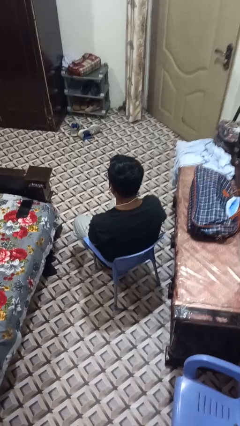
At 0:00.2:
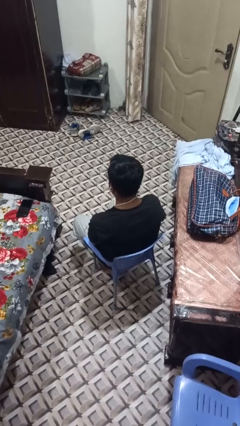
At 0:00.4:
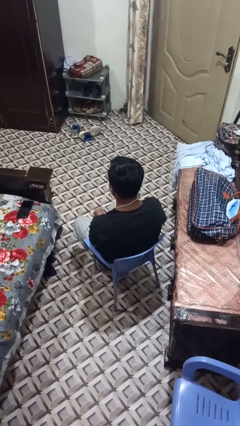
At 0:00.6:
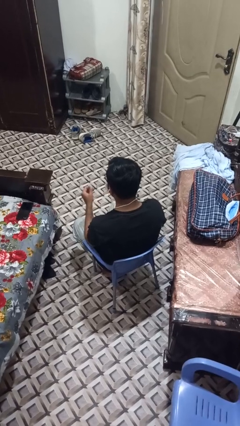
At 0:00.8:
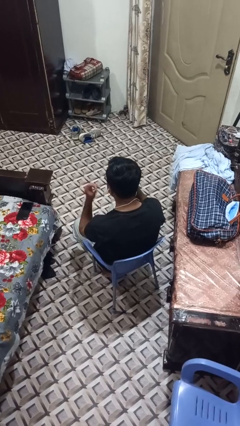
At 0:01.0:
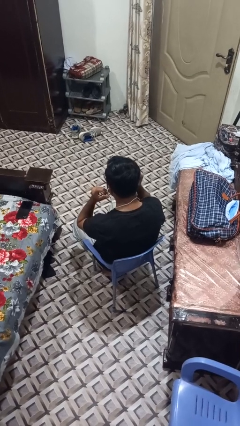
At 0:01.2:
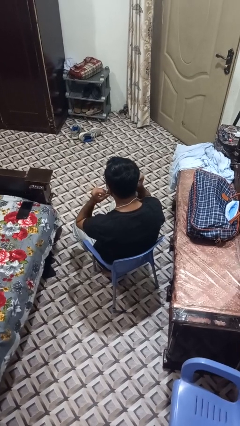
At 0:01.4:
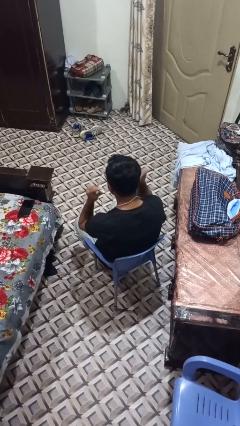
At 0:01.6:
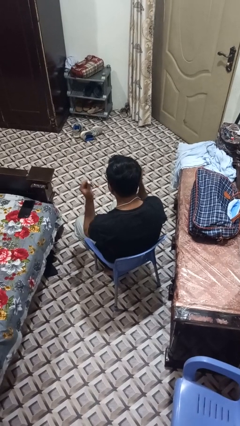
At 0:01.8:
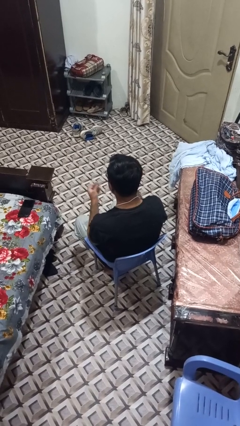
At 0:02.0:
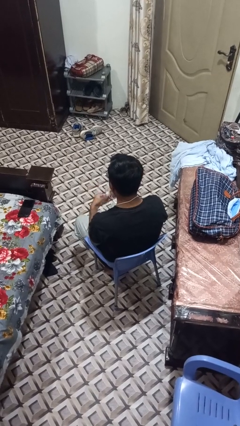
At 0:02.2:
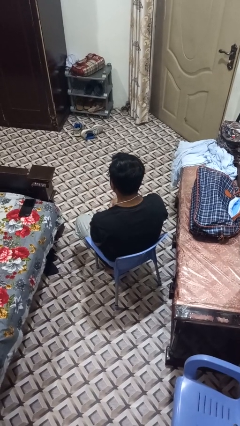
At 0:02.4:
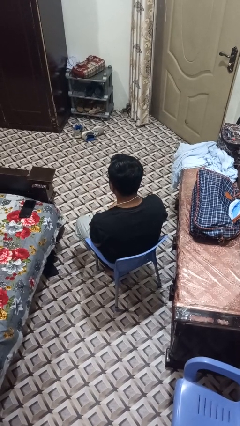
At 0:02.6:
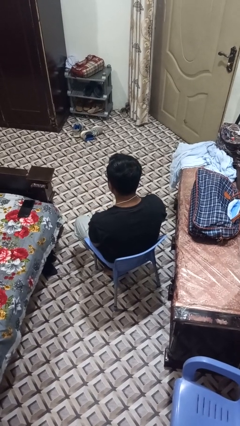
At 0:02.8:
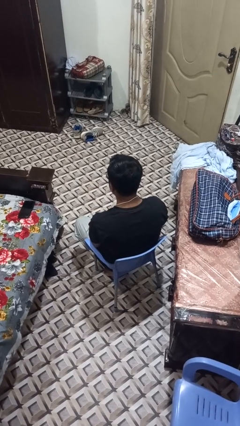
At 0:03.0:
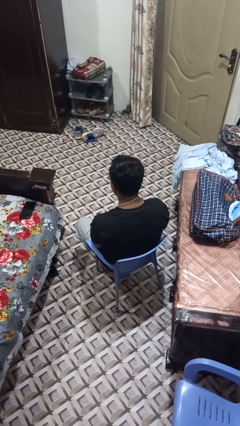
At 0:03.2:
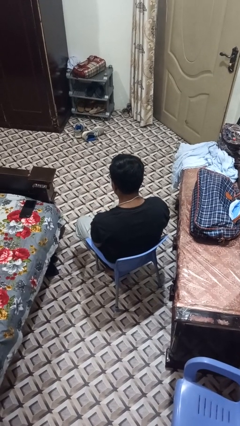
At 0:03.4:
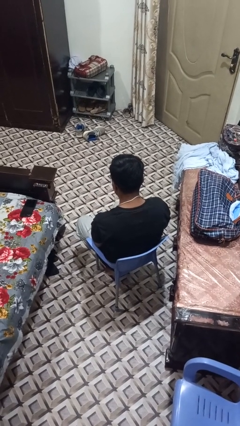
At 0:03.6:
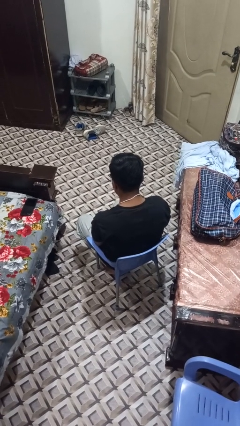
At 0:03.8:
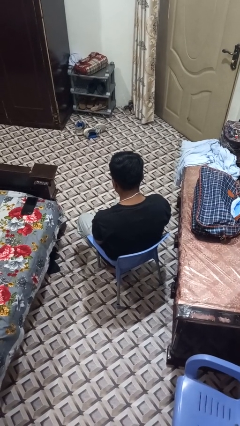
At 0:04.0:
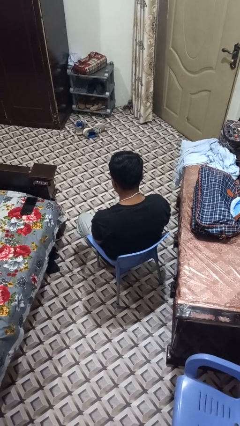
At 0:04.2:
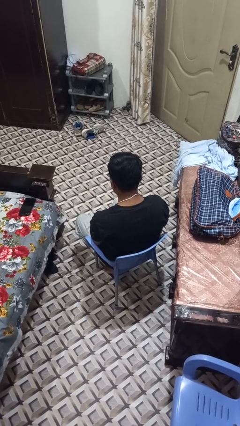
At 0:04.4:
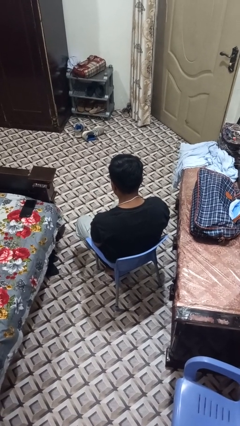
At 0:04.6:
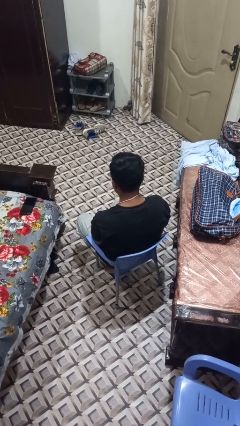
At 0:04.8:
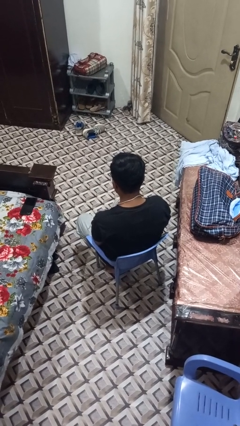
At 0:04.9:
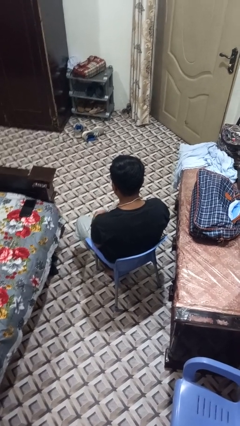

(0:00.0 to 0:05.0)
person takes off headphones

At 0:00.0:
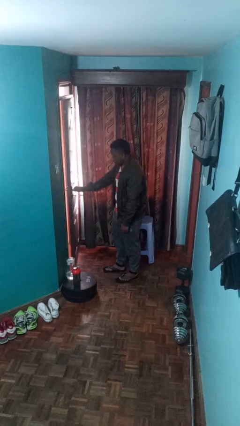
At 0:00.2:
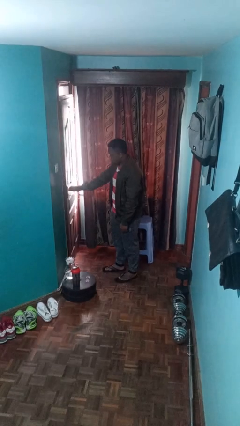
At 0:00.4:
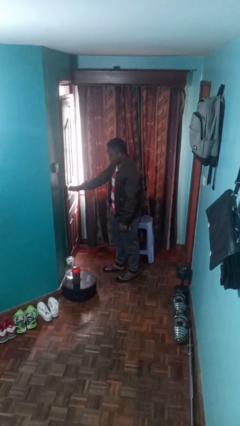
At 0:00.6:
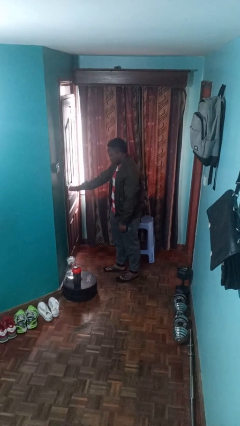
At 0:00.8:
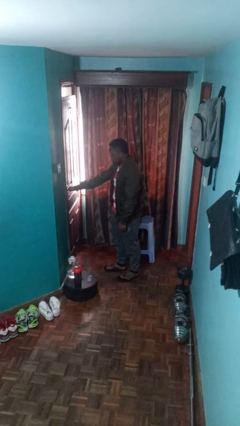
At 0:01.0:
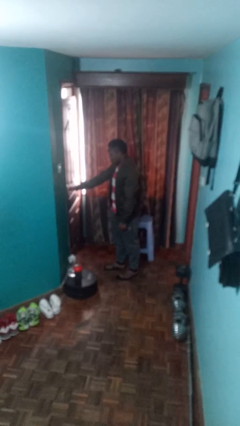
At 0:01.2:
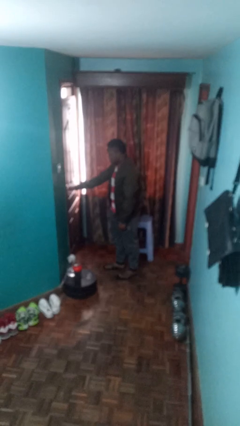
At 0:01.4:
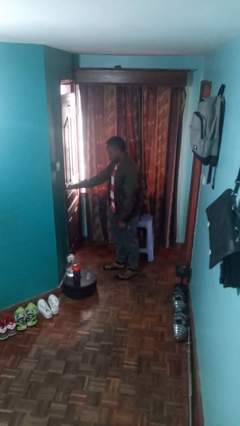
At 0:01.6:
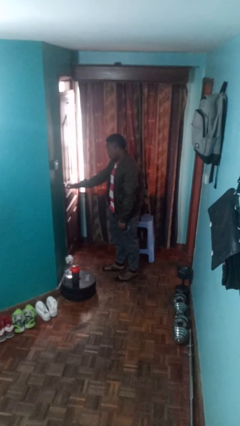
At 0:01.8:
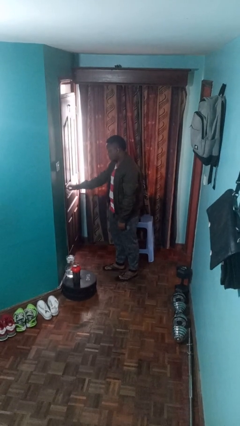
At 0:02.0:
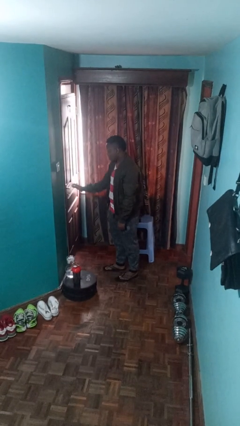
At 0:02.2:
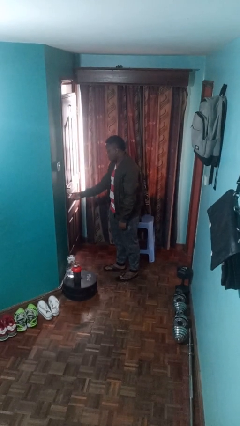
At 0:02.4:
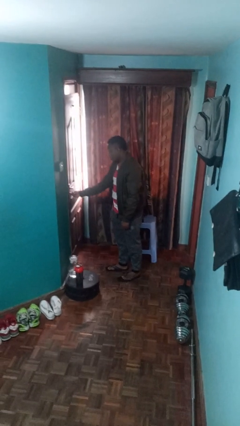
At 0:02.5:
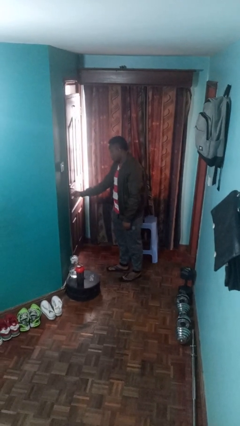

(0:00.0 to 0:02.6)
person closes facility door

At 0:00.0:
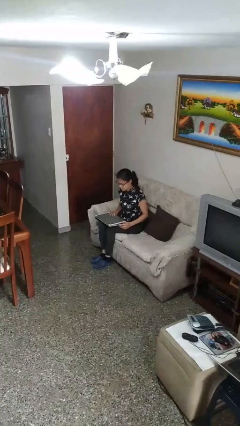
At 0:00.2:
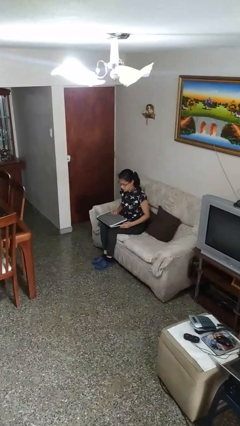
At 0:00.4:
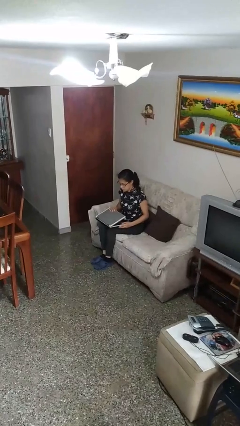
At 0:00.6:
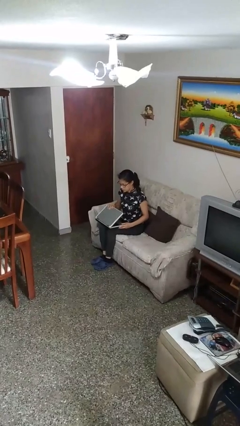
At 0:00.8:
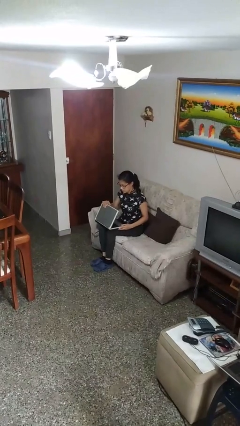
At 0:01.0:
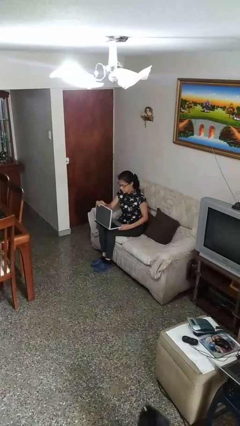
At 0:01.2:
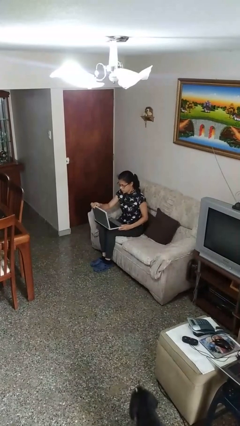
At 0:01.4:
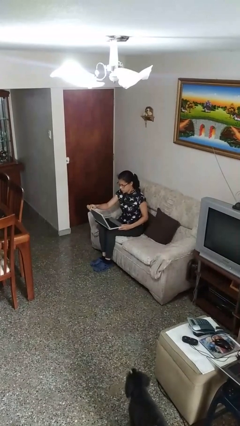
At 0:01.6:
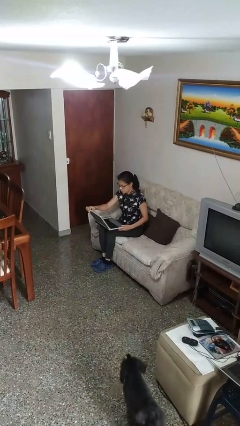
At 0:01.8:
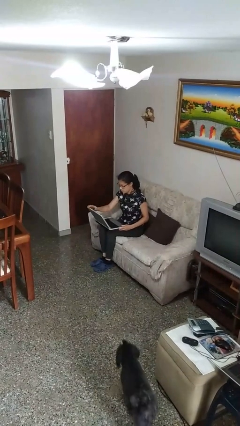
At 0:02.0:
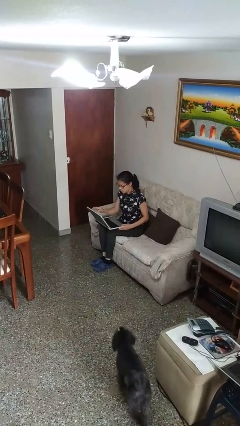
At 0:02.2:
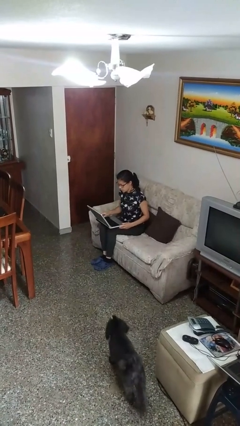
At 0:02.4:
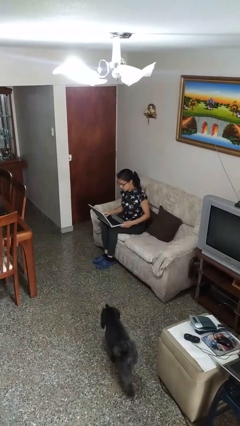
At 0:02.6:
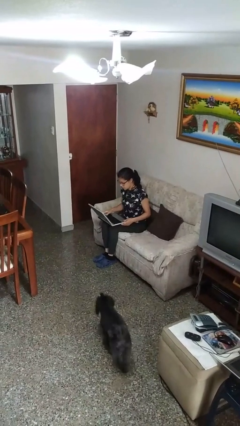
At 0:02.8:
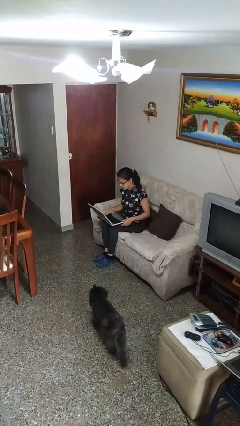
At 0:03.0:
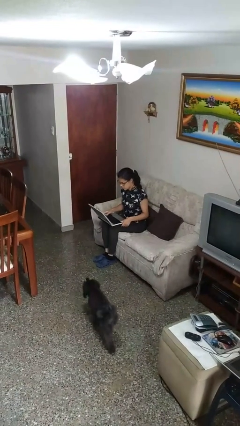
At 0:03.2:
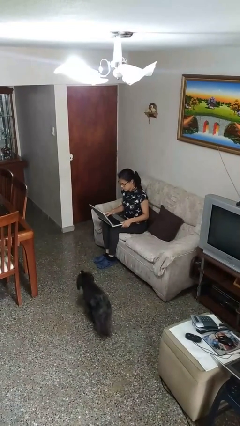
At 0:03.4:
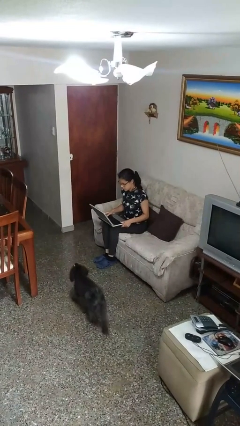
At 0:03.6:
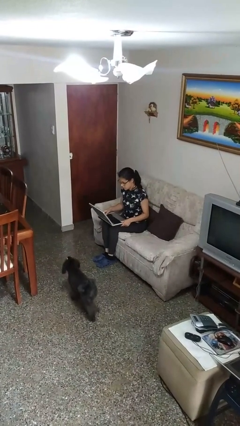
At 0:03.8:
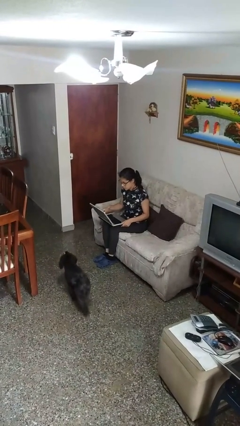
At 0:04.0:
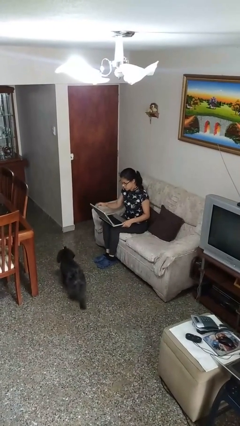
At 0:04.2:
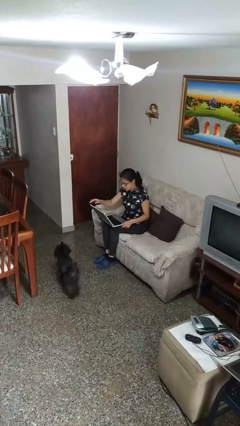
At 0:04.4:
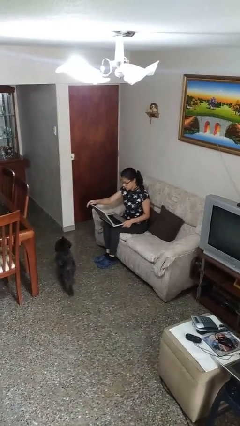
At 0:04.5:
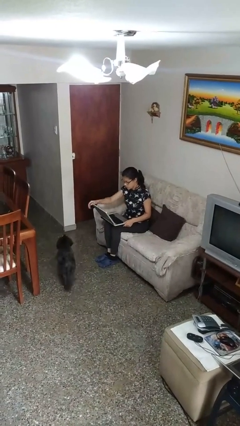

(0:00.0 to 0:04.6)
person opens laptop

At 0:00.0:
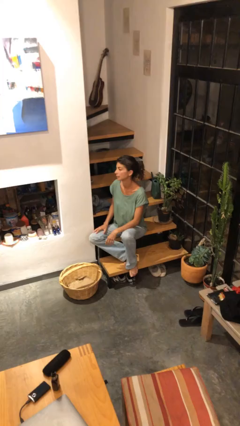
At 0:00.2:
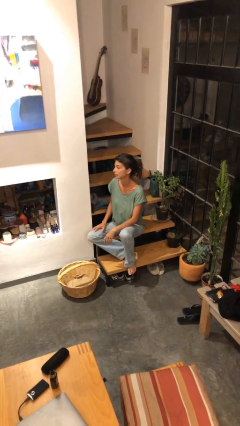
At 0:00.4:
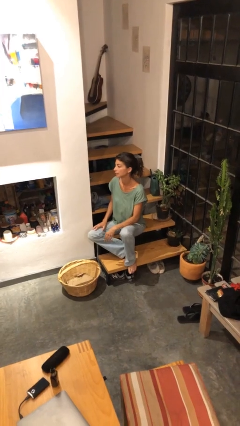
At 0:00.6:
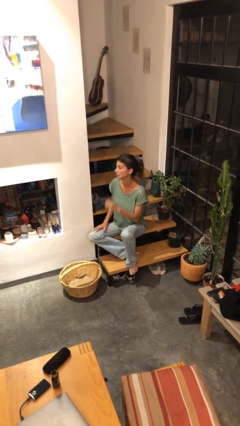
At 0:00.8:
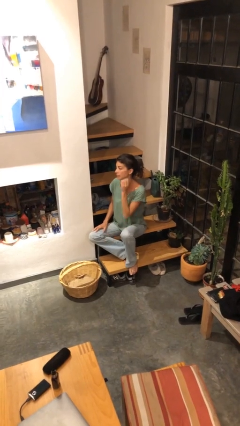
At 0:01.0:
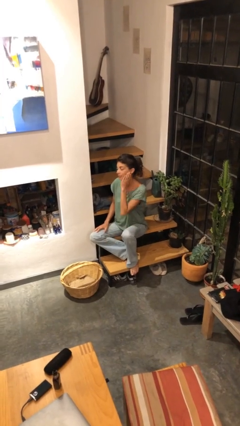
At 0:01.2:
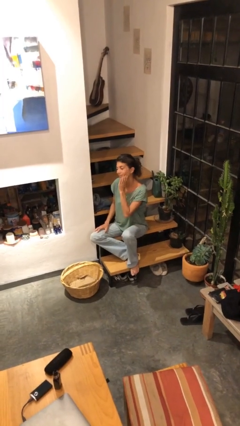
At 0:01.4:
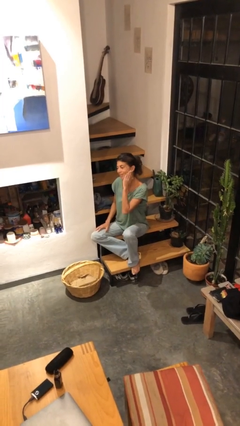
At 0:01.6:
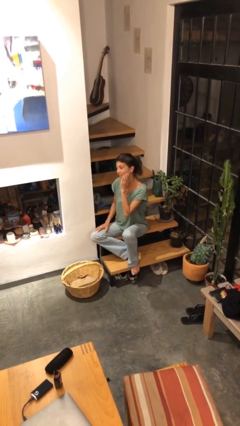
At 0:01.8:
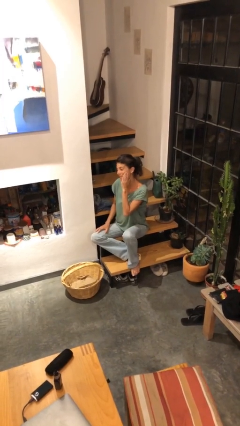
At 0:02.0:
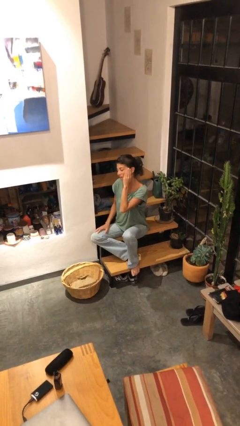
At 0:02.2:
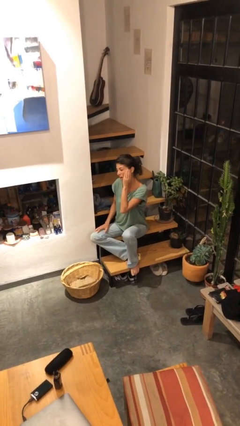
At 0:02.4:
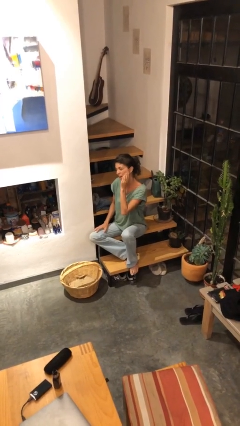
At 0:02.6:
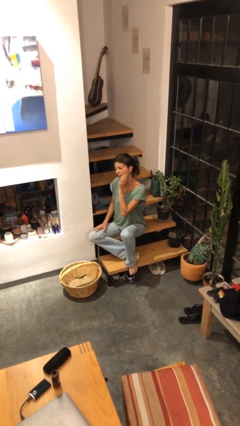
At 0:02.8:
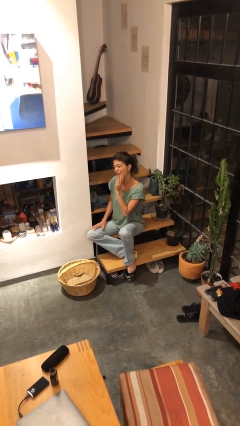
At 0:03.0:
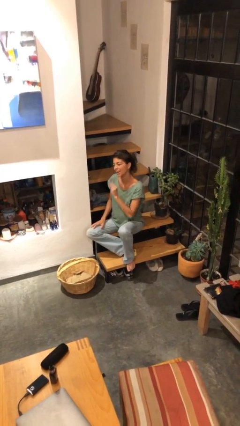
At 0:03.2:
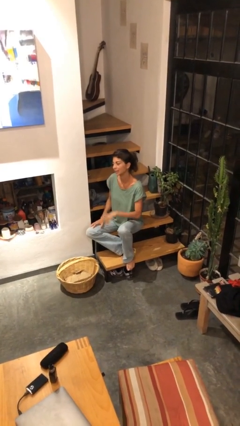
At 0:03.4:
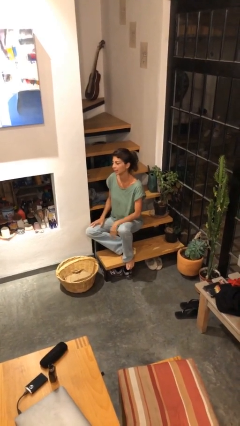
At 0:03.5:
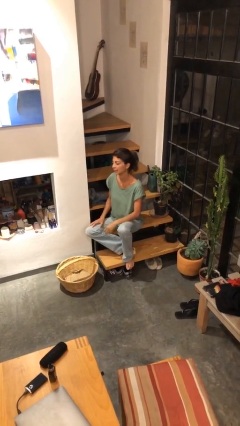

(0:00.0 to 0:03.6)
person scratches face

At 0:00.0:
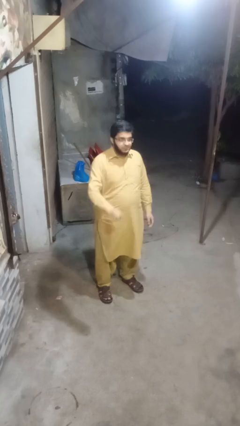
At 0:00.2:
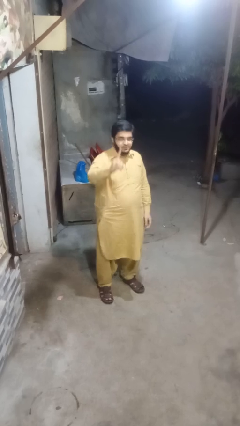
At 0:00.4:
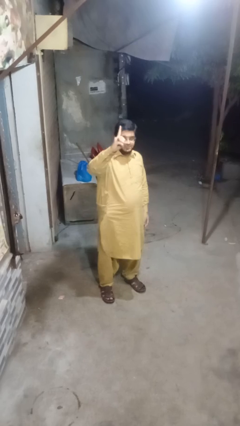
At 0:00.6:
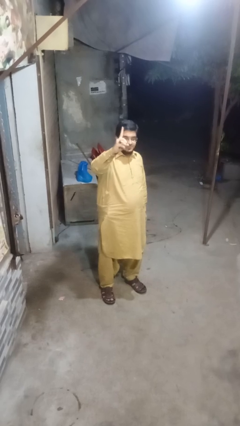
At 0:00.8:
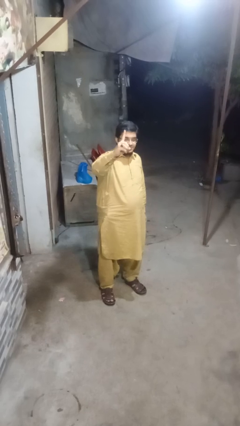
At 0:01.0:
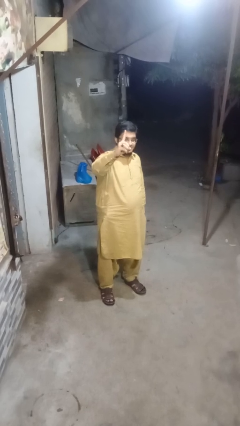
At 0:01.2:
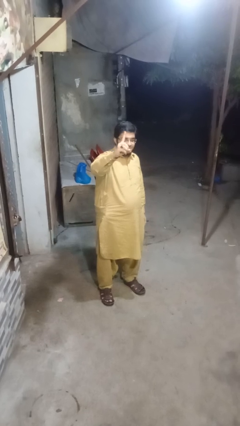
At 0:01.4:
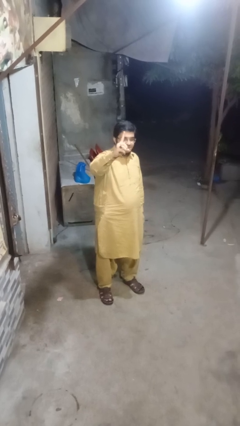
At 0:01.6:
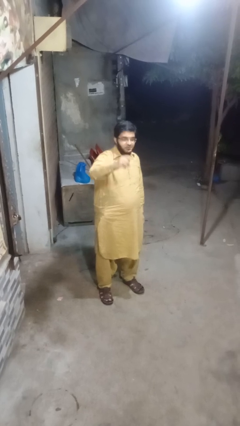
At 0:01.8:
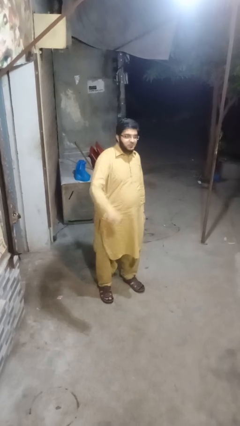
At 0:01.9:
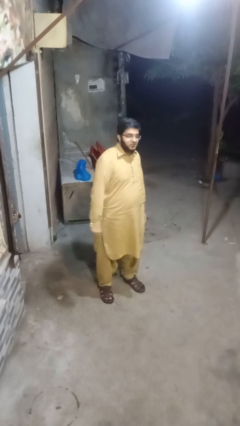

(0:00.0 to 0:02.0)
person gestures number one
